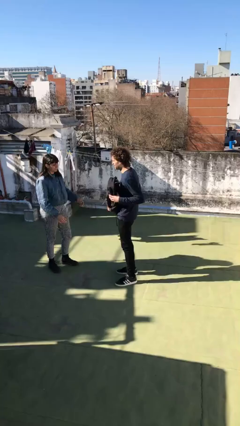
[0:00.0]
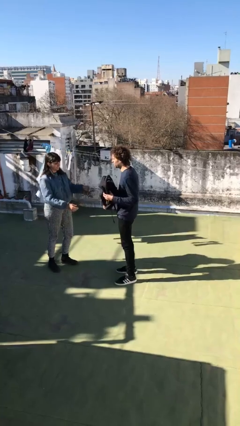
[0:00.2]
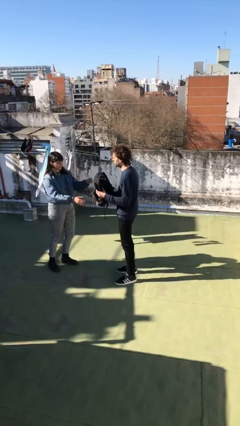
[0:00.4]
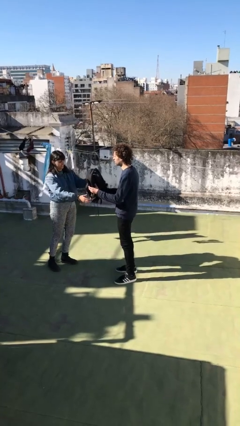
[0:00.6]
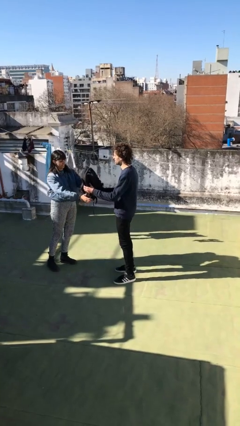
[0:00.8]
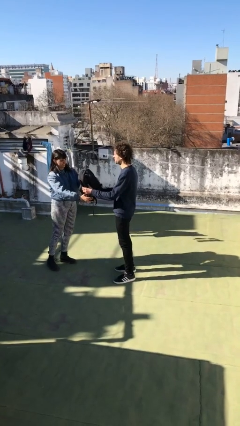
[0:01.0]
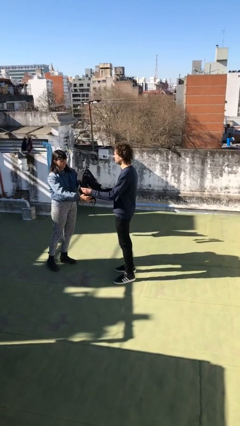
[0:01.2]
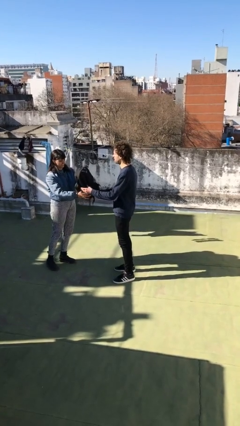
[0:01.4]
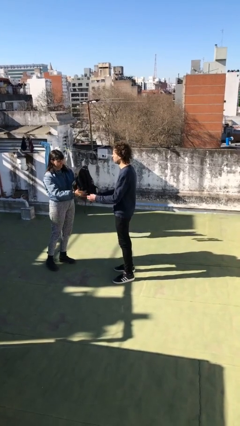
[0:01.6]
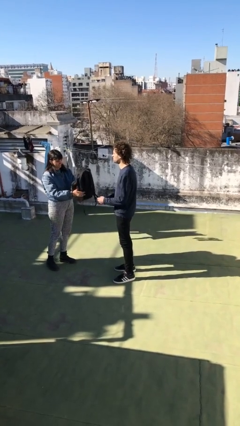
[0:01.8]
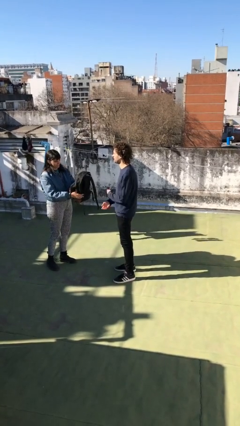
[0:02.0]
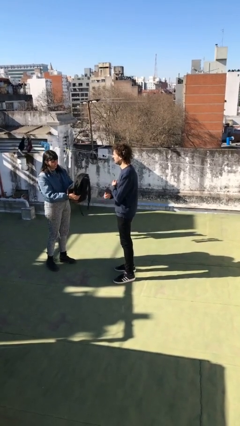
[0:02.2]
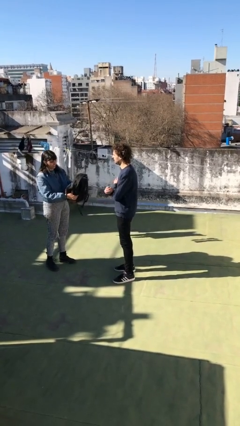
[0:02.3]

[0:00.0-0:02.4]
person transfers object to person

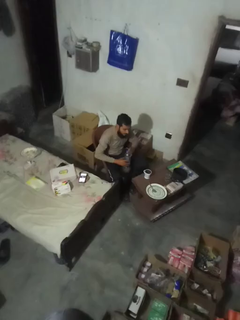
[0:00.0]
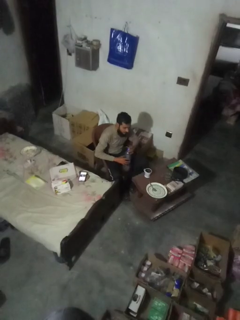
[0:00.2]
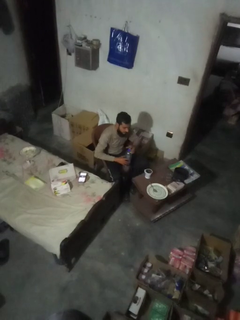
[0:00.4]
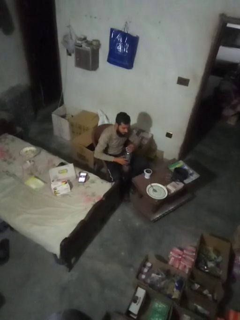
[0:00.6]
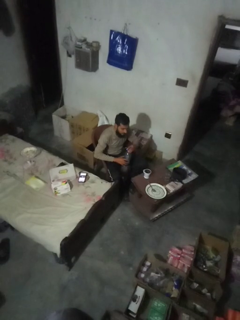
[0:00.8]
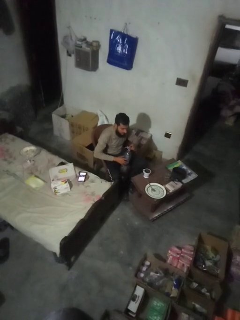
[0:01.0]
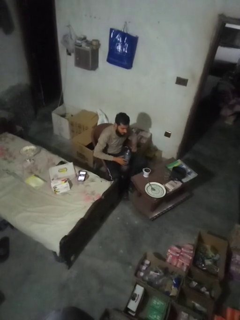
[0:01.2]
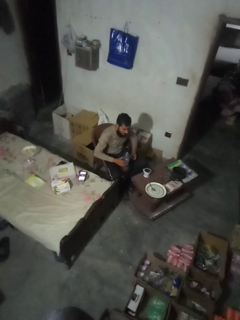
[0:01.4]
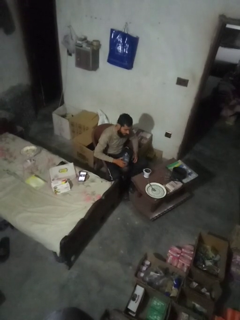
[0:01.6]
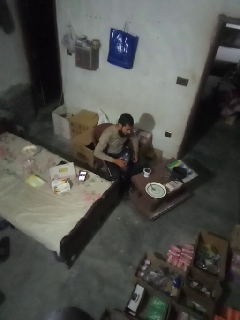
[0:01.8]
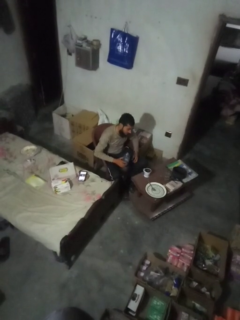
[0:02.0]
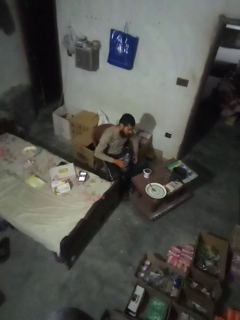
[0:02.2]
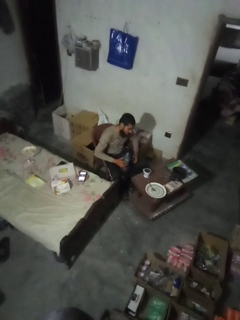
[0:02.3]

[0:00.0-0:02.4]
person unscrews lid from bottle

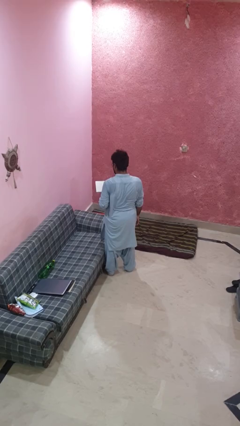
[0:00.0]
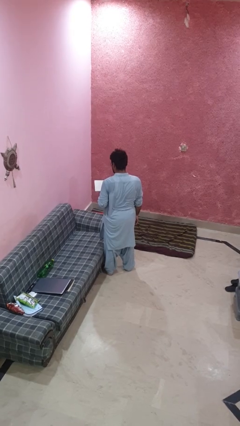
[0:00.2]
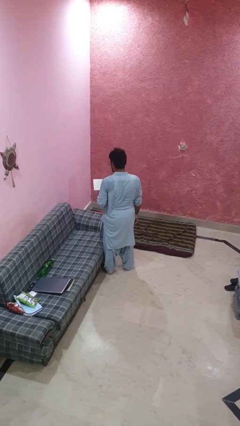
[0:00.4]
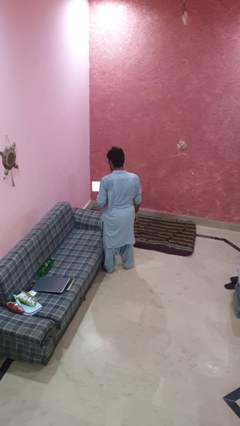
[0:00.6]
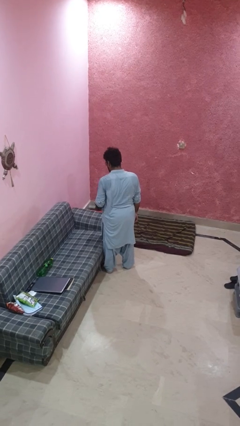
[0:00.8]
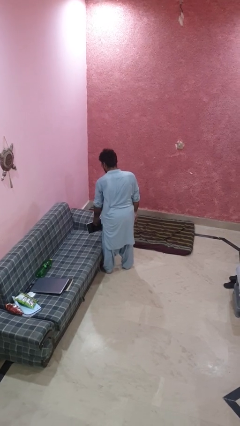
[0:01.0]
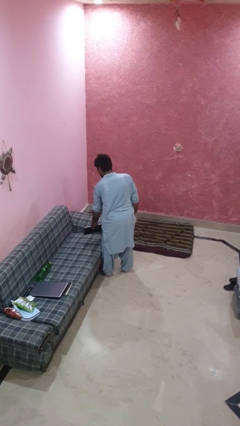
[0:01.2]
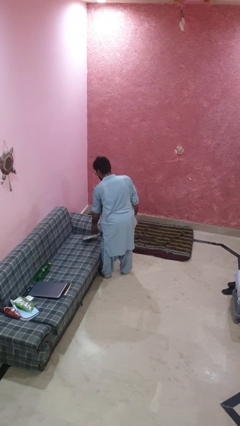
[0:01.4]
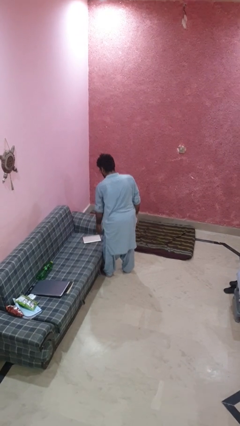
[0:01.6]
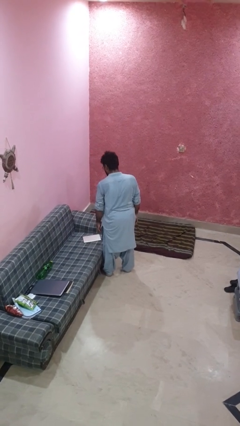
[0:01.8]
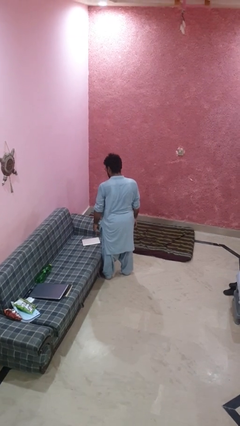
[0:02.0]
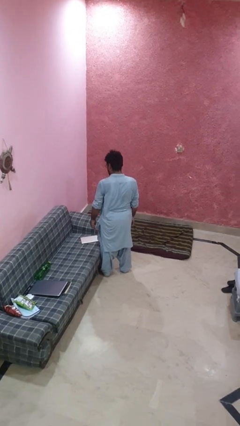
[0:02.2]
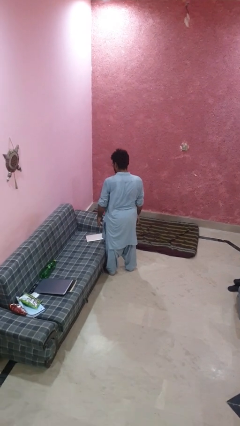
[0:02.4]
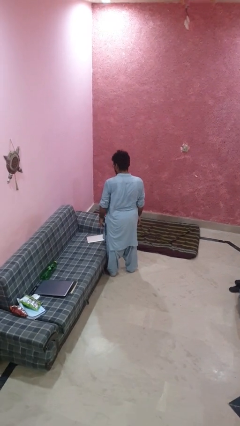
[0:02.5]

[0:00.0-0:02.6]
person puts down object on couch

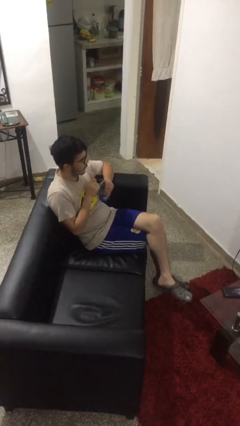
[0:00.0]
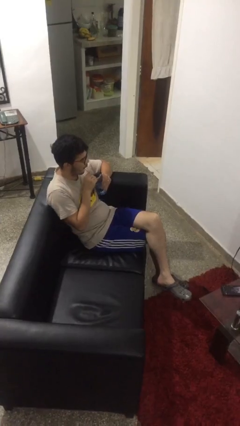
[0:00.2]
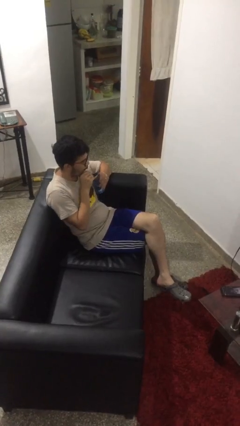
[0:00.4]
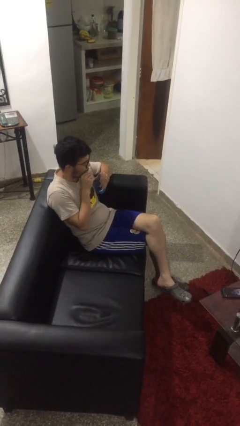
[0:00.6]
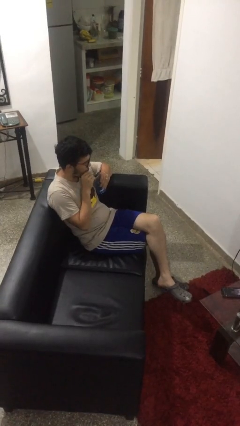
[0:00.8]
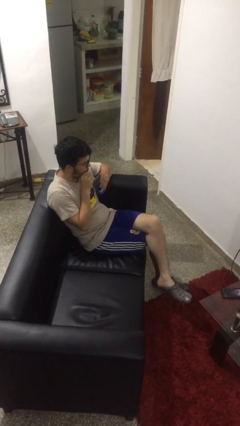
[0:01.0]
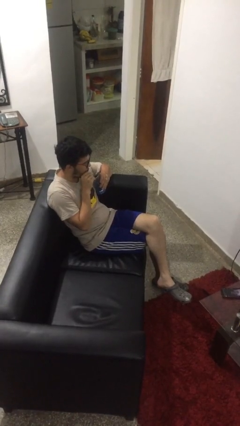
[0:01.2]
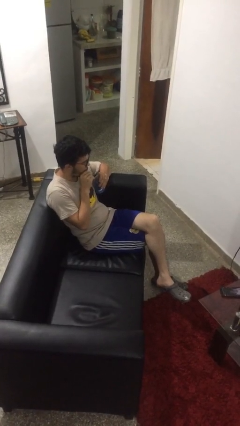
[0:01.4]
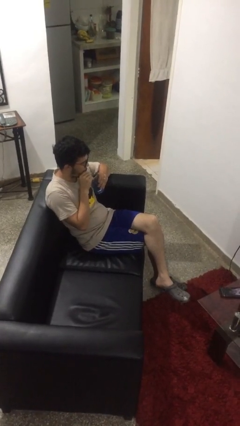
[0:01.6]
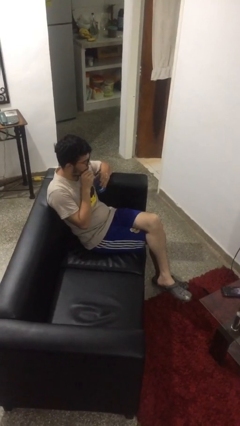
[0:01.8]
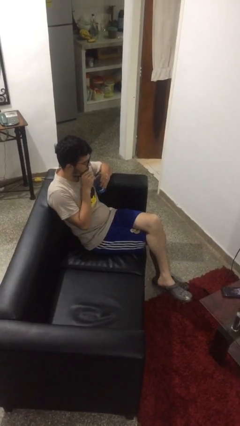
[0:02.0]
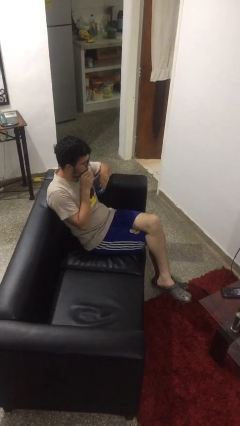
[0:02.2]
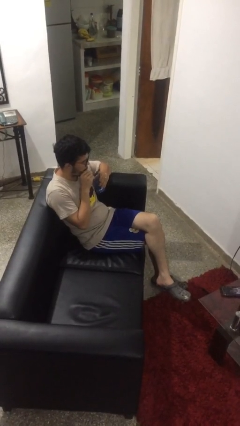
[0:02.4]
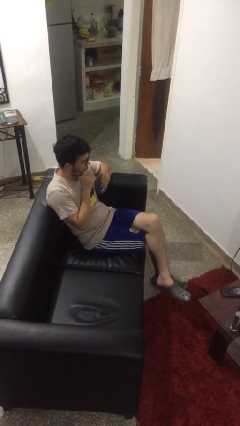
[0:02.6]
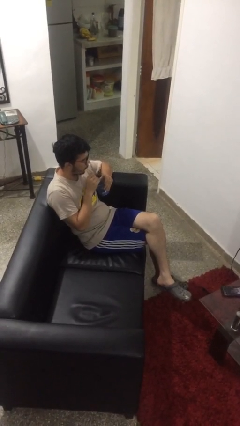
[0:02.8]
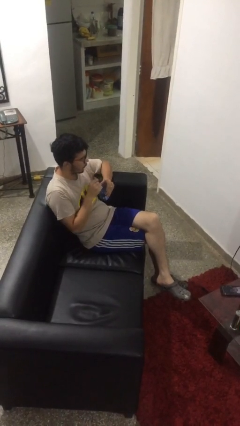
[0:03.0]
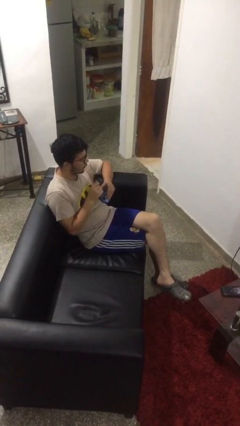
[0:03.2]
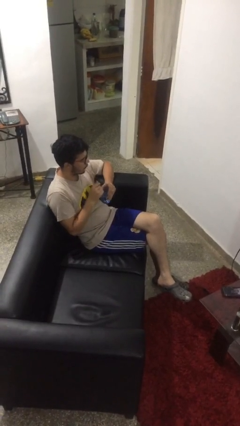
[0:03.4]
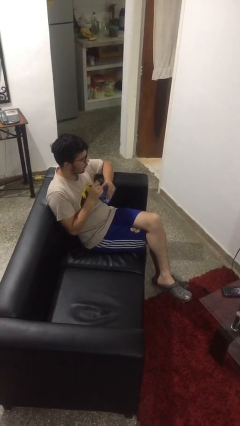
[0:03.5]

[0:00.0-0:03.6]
person drinks from straw

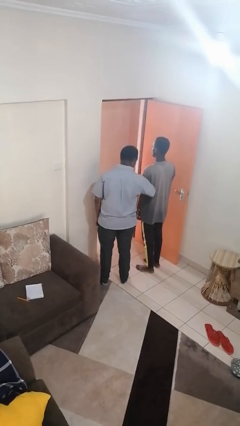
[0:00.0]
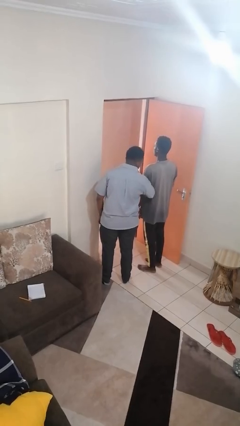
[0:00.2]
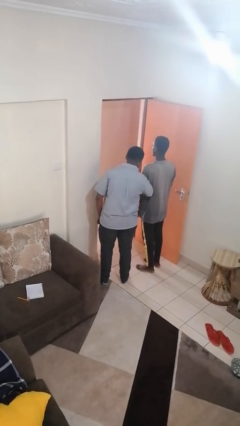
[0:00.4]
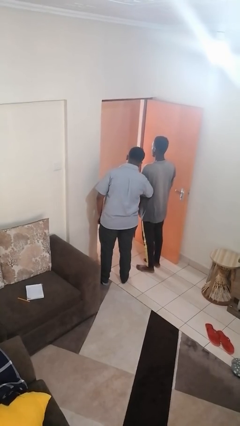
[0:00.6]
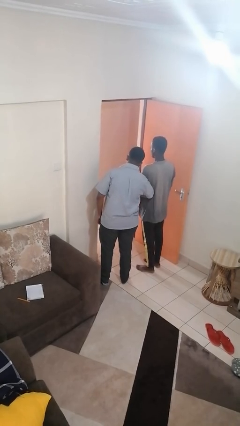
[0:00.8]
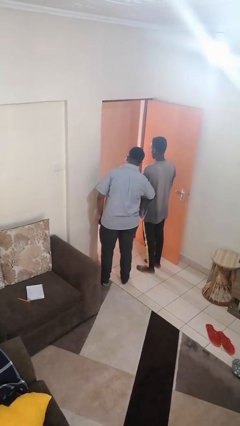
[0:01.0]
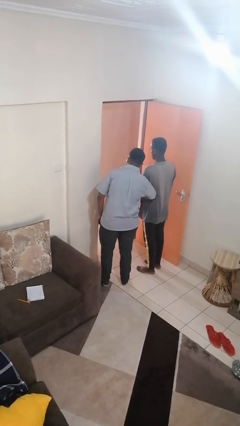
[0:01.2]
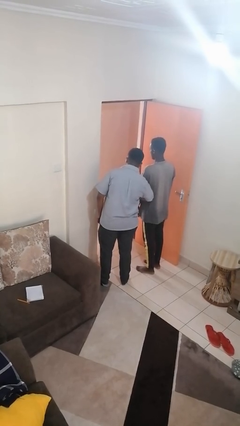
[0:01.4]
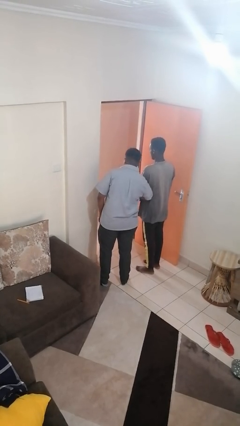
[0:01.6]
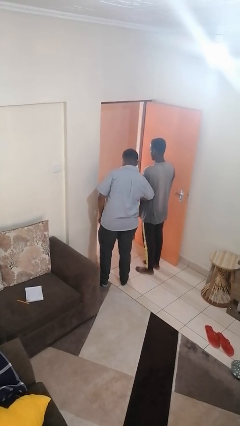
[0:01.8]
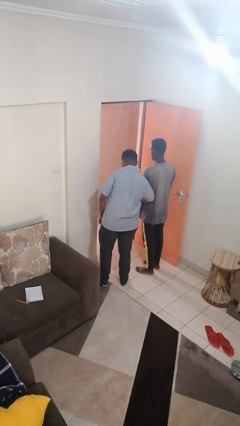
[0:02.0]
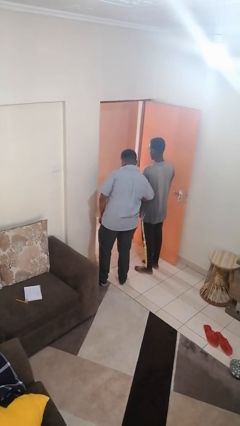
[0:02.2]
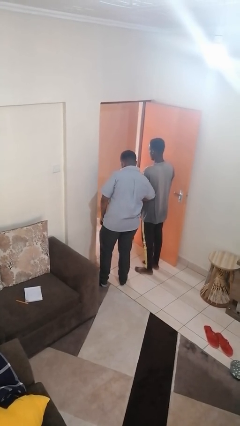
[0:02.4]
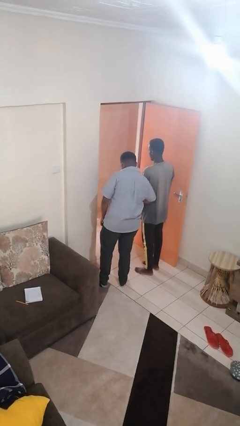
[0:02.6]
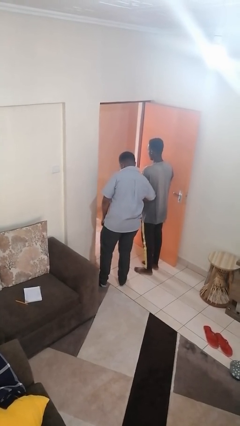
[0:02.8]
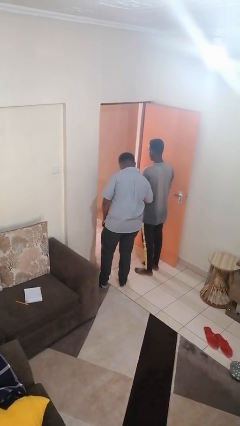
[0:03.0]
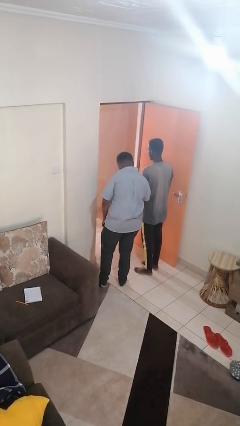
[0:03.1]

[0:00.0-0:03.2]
person nudges person with elbow

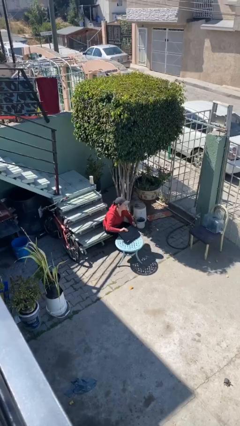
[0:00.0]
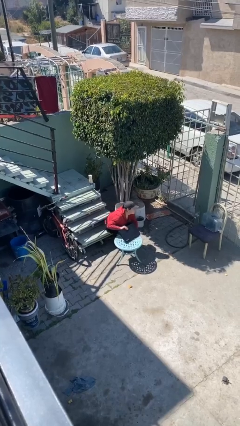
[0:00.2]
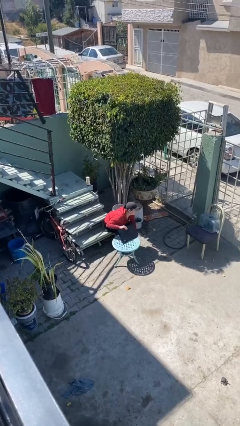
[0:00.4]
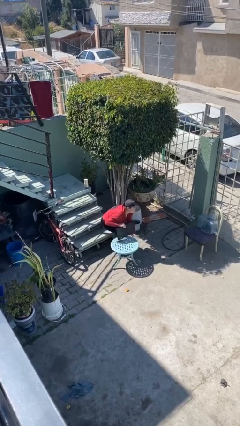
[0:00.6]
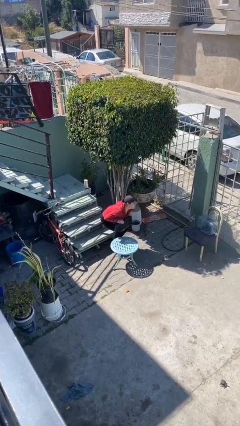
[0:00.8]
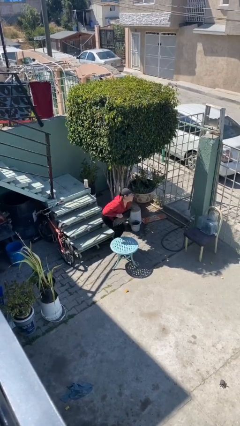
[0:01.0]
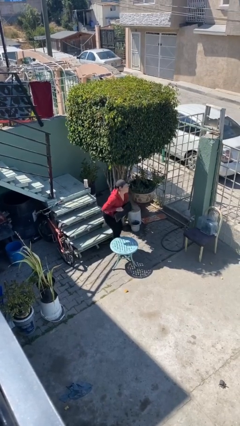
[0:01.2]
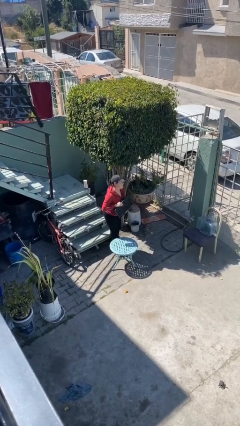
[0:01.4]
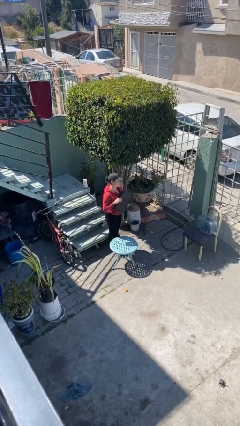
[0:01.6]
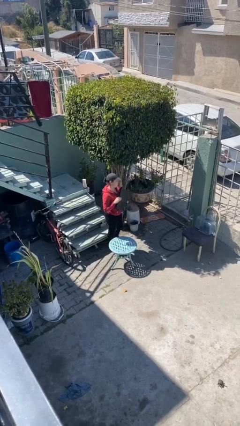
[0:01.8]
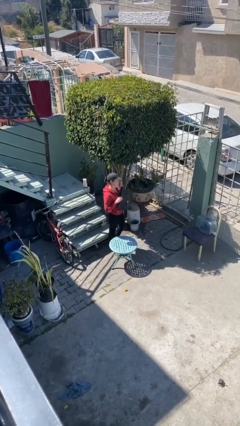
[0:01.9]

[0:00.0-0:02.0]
person stands up

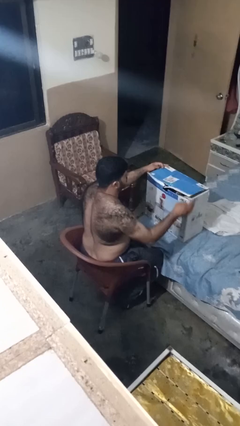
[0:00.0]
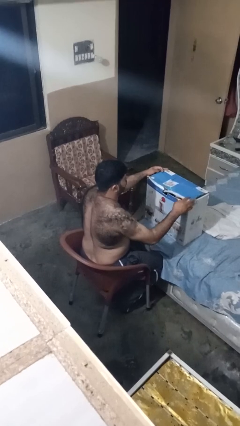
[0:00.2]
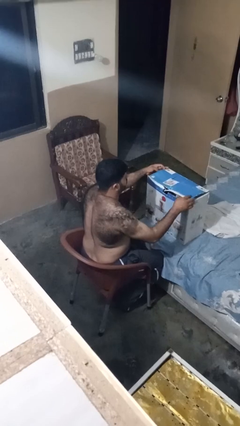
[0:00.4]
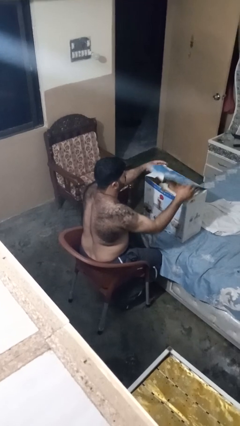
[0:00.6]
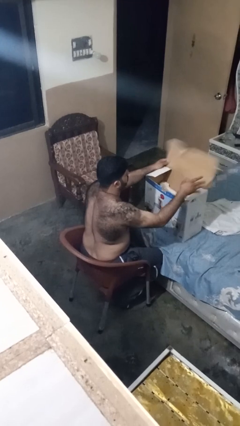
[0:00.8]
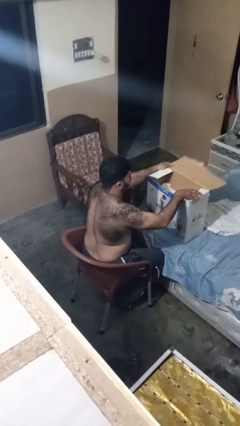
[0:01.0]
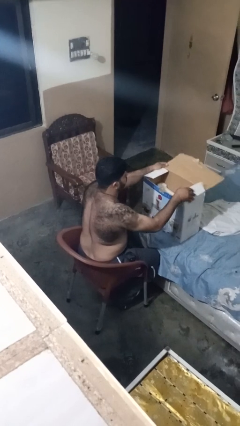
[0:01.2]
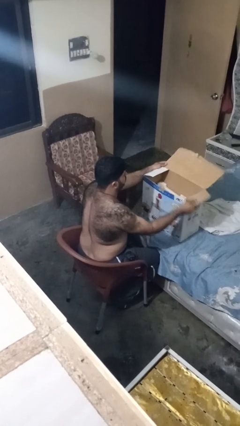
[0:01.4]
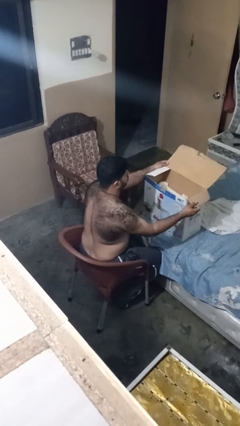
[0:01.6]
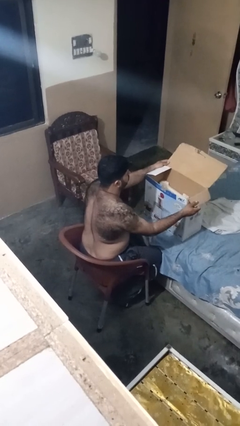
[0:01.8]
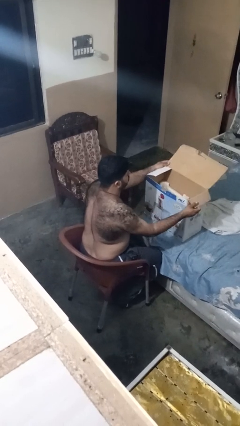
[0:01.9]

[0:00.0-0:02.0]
person opens box
